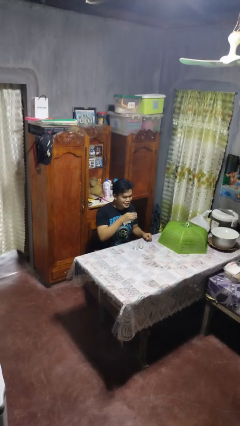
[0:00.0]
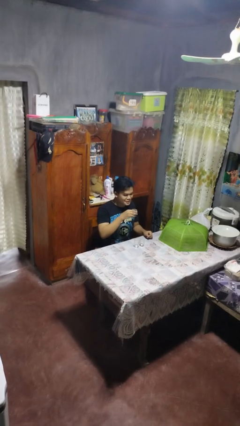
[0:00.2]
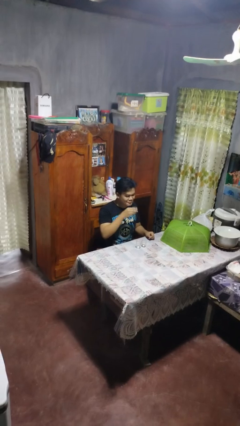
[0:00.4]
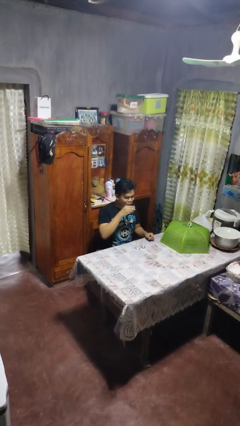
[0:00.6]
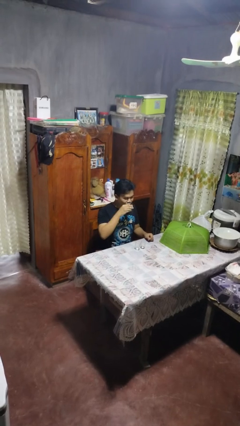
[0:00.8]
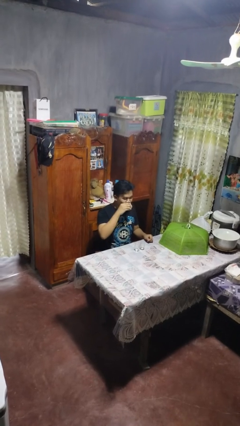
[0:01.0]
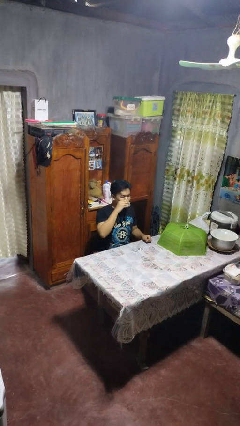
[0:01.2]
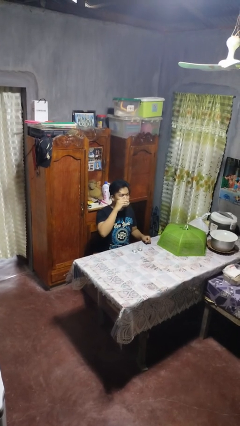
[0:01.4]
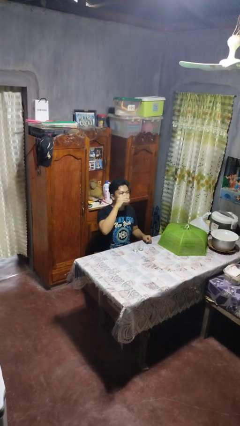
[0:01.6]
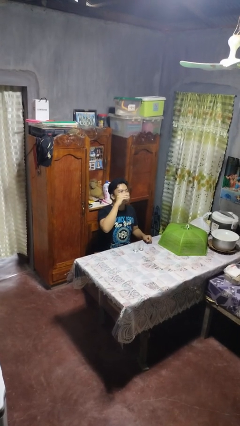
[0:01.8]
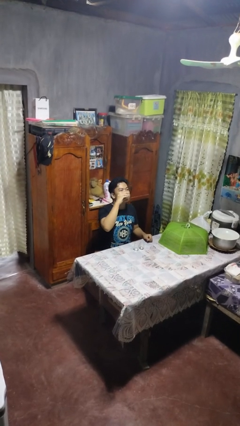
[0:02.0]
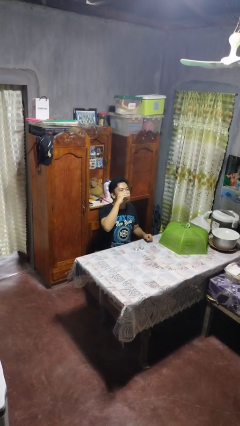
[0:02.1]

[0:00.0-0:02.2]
person drinks from shotglass

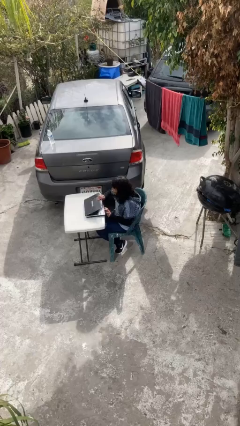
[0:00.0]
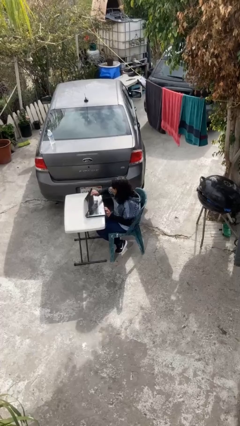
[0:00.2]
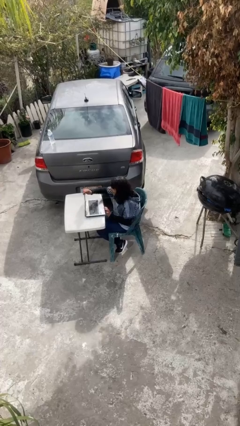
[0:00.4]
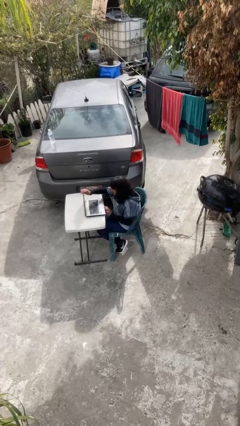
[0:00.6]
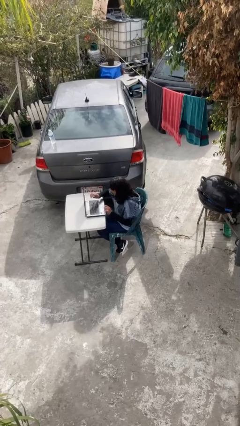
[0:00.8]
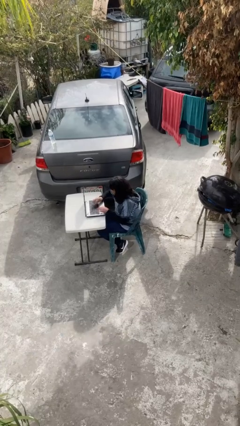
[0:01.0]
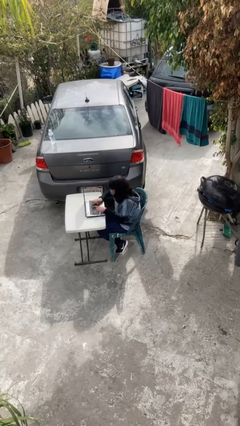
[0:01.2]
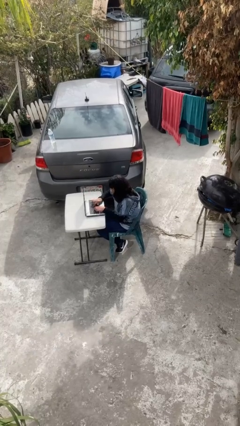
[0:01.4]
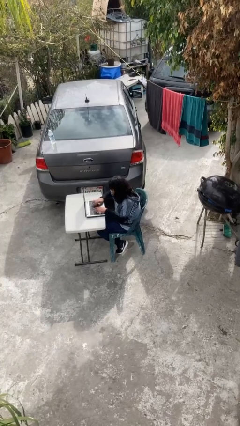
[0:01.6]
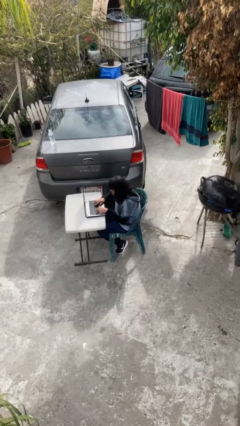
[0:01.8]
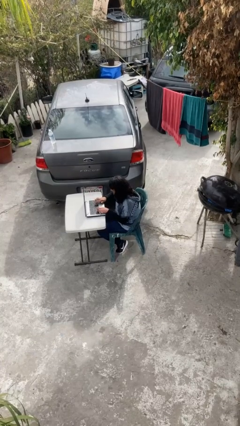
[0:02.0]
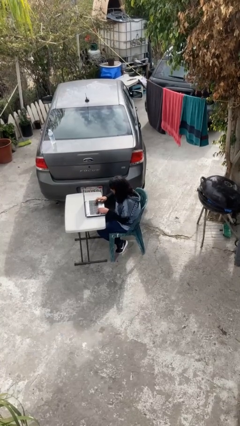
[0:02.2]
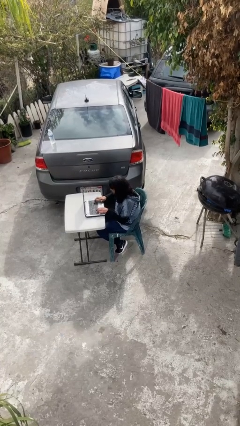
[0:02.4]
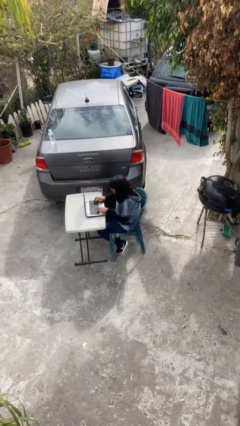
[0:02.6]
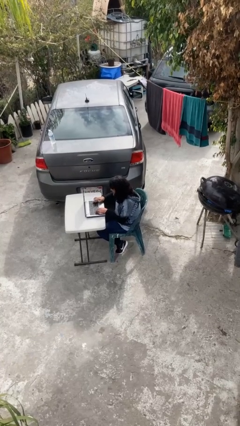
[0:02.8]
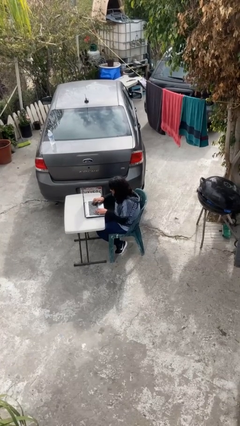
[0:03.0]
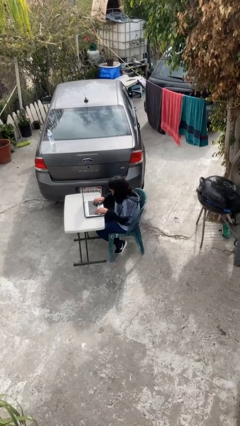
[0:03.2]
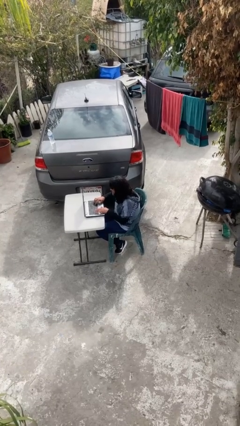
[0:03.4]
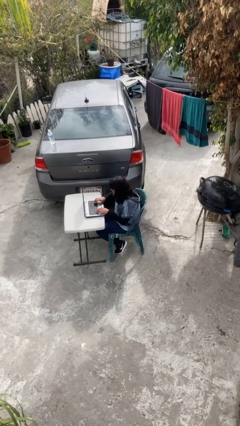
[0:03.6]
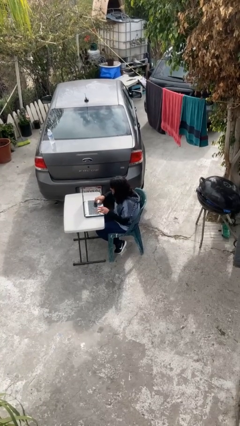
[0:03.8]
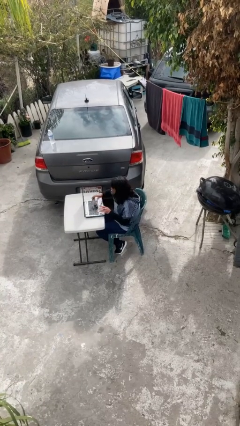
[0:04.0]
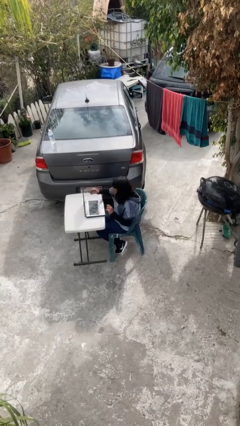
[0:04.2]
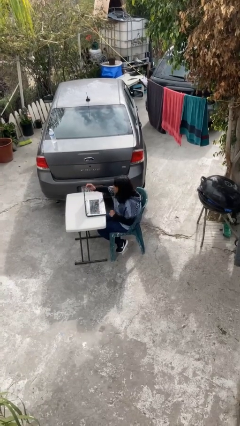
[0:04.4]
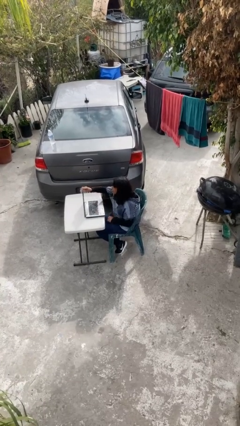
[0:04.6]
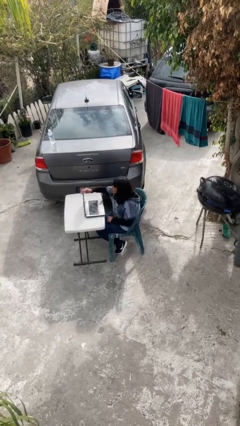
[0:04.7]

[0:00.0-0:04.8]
person interacts with laptop

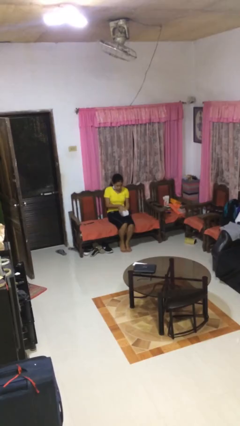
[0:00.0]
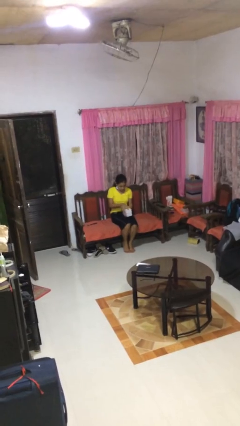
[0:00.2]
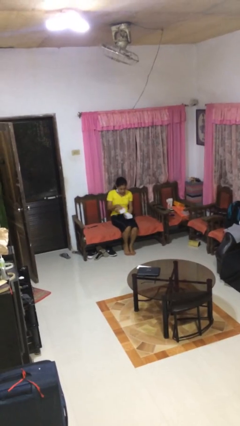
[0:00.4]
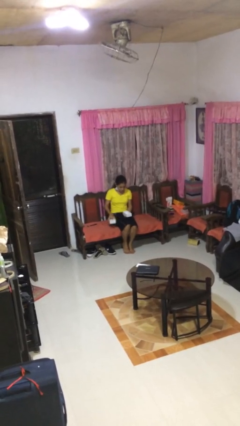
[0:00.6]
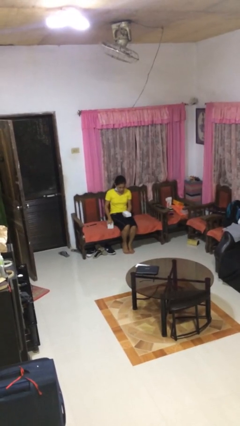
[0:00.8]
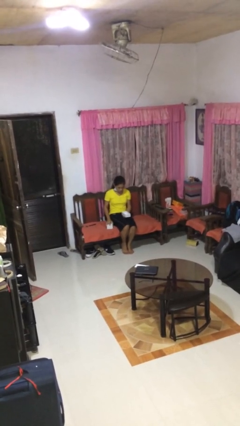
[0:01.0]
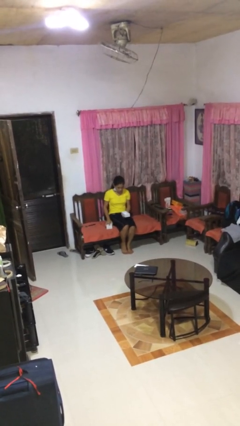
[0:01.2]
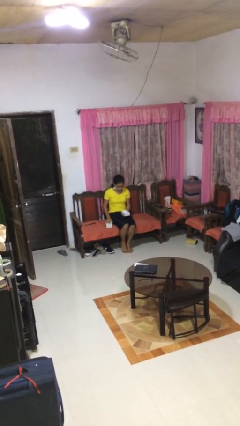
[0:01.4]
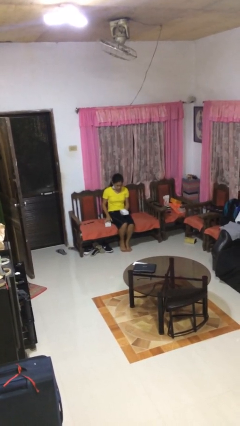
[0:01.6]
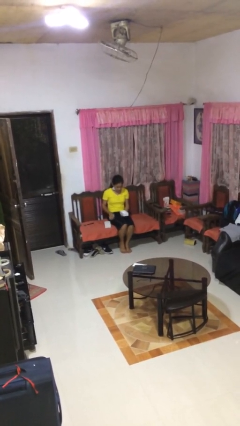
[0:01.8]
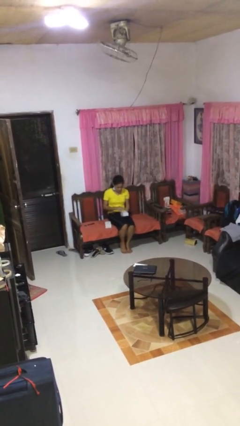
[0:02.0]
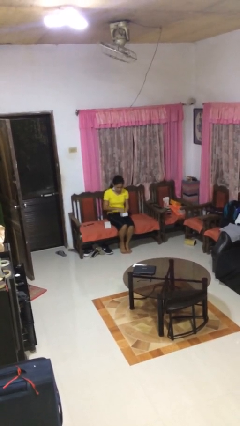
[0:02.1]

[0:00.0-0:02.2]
person opens jewelry box

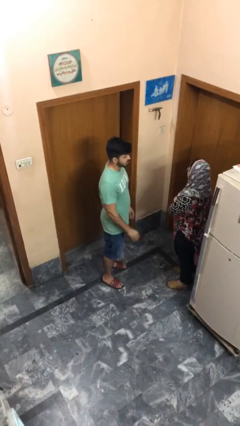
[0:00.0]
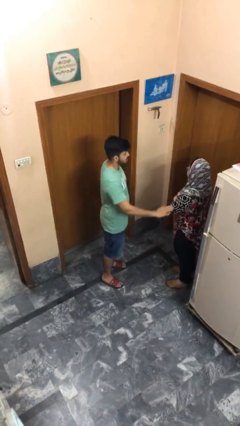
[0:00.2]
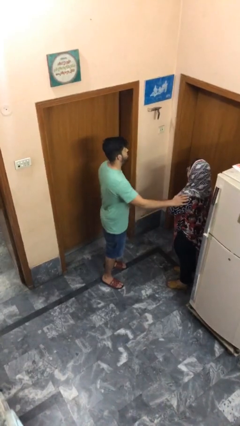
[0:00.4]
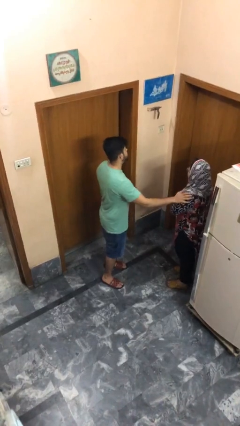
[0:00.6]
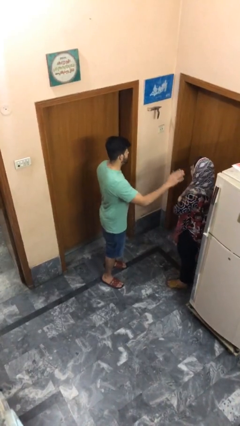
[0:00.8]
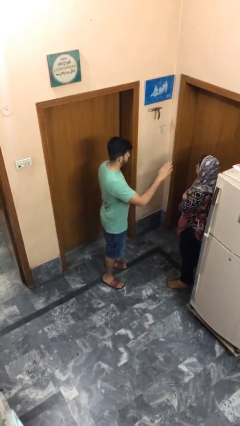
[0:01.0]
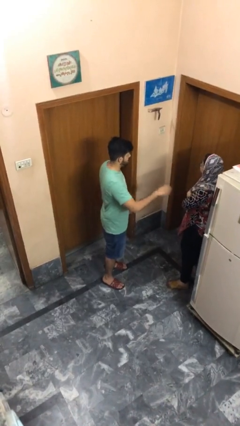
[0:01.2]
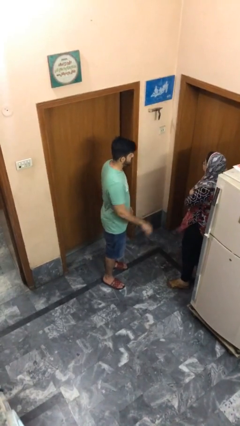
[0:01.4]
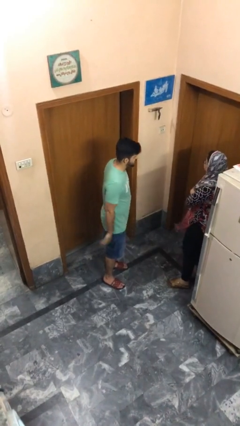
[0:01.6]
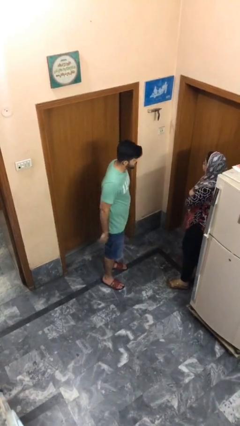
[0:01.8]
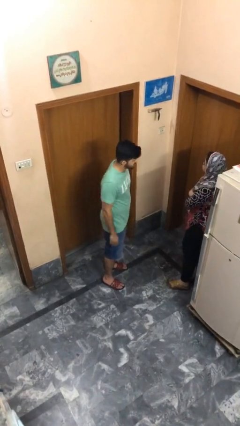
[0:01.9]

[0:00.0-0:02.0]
person shoves person

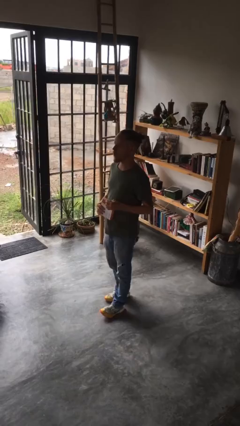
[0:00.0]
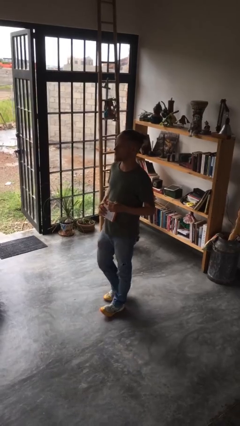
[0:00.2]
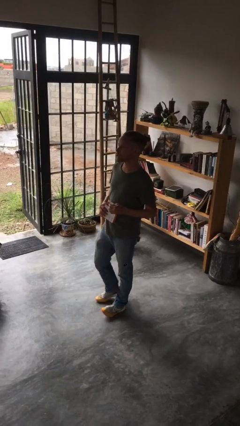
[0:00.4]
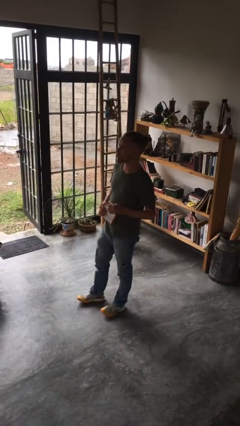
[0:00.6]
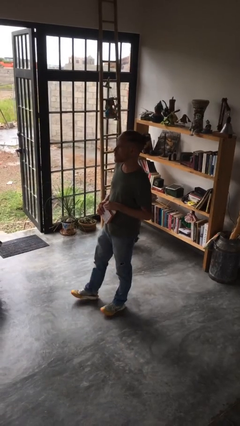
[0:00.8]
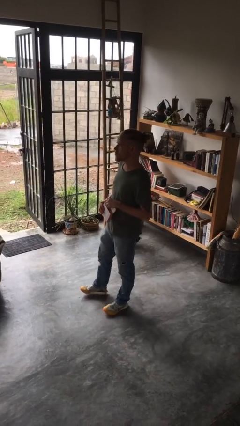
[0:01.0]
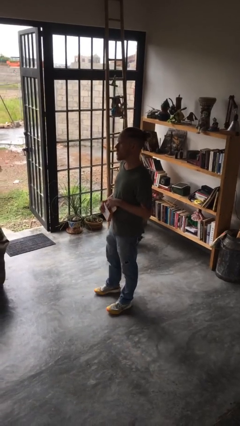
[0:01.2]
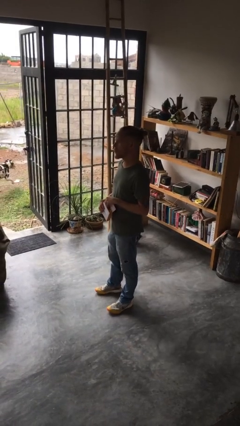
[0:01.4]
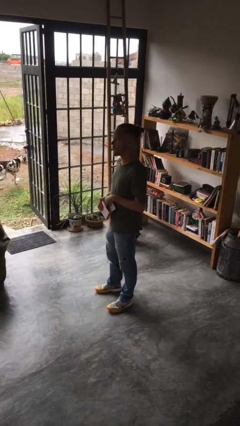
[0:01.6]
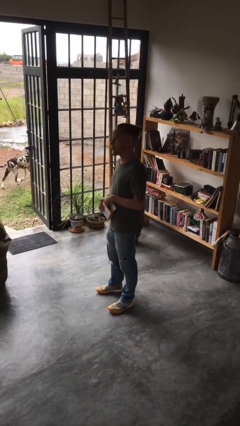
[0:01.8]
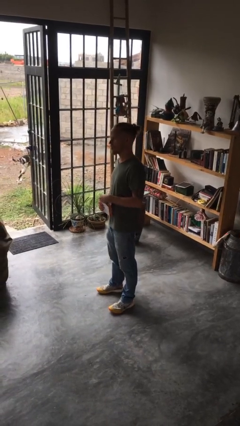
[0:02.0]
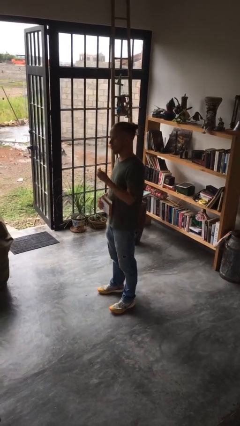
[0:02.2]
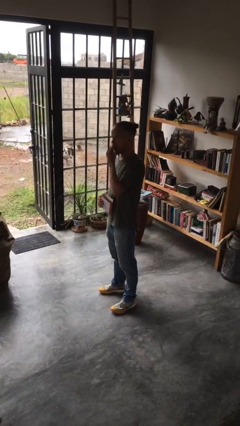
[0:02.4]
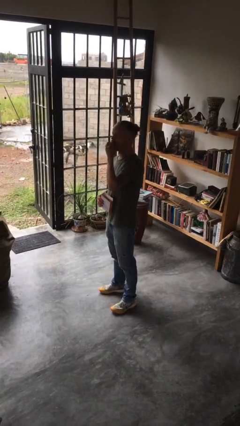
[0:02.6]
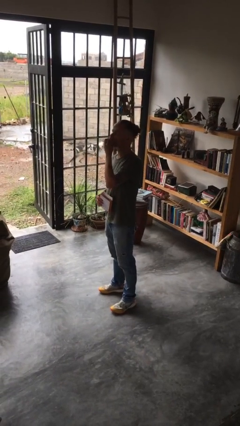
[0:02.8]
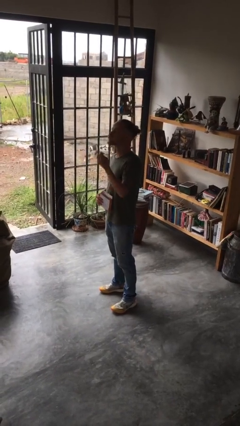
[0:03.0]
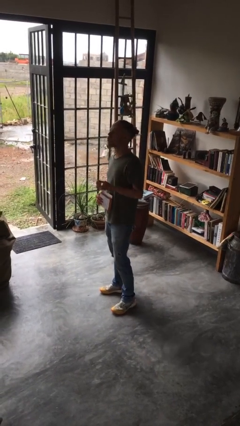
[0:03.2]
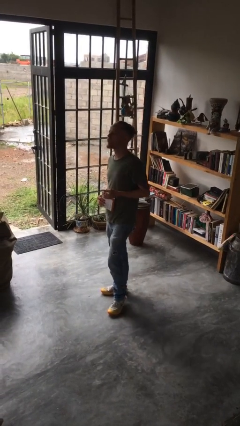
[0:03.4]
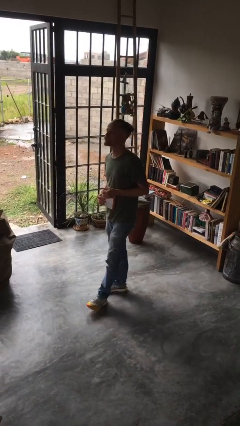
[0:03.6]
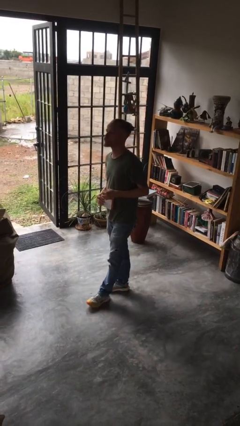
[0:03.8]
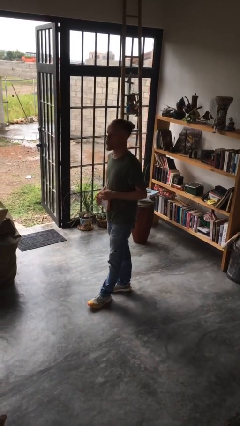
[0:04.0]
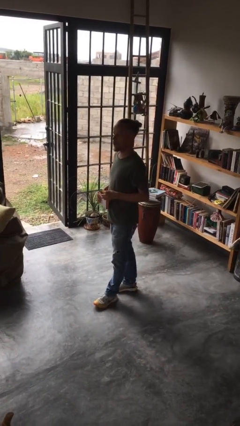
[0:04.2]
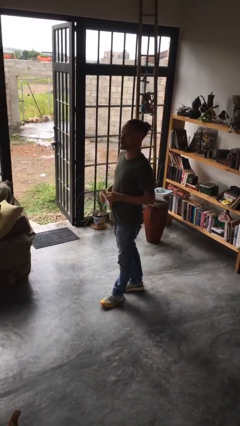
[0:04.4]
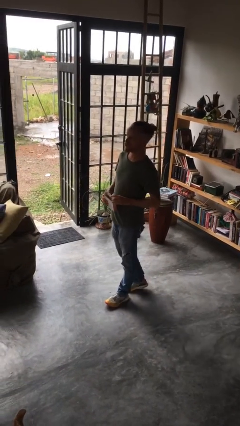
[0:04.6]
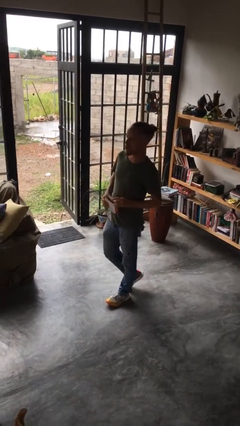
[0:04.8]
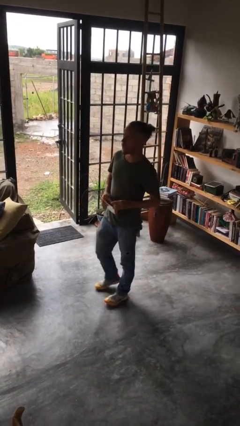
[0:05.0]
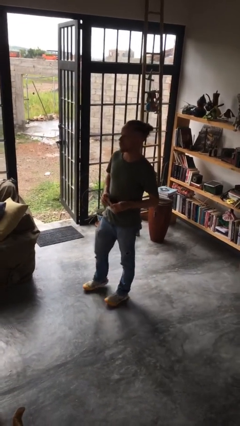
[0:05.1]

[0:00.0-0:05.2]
person eats snack from bag

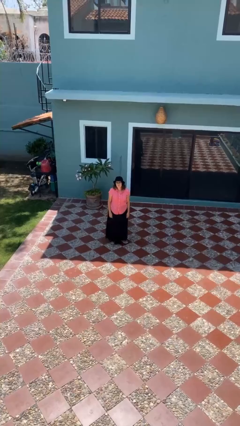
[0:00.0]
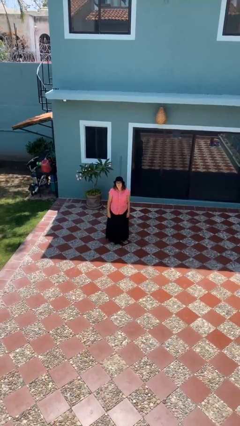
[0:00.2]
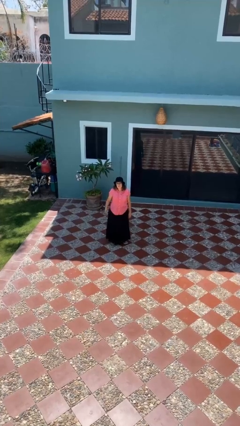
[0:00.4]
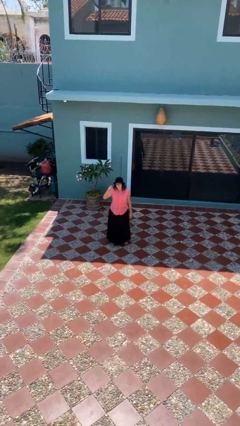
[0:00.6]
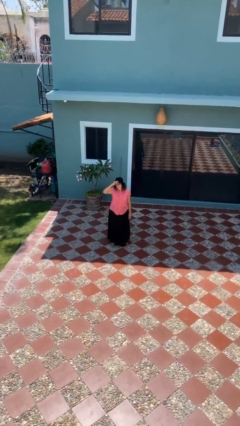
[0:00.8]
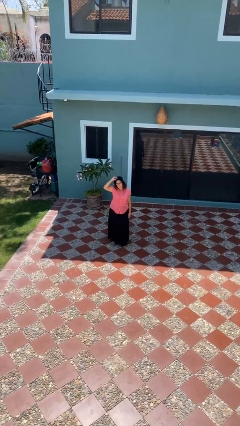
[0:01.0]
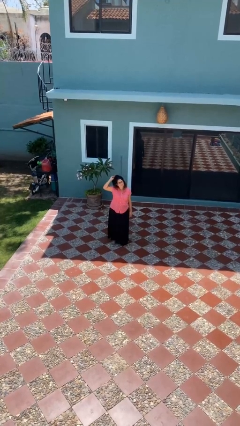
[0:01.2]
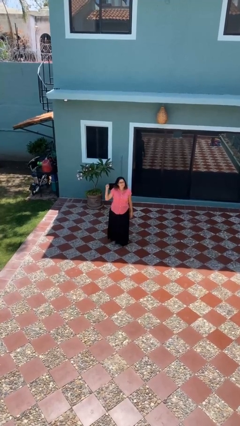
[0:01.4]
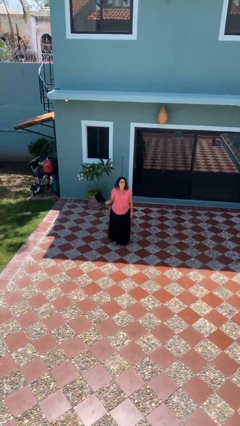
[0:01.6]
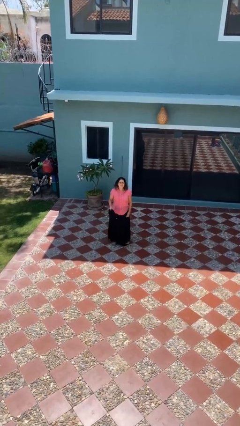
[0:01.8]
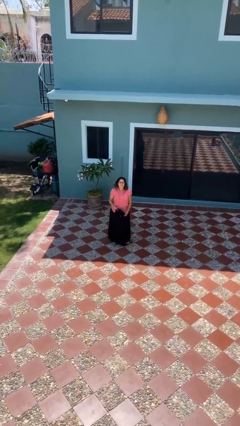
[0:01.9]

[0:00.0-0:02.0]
person takes off hat
